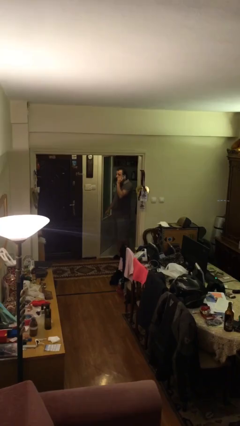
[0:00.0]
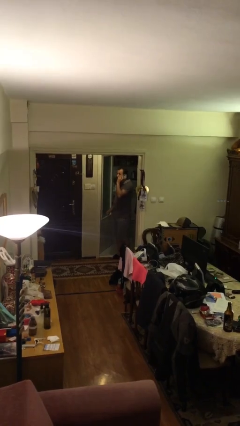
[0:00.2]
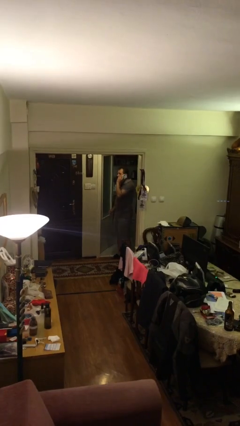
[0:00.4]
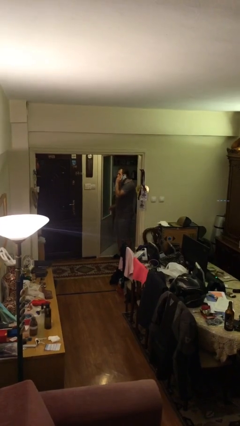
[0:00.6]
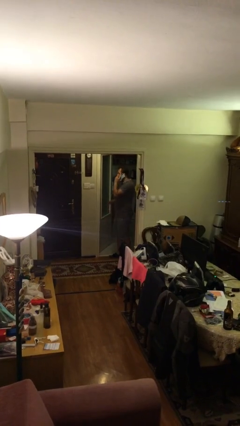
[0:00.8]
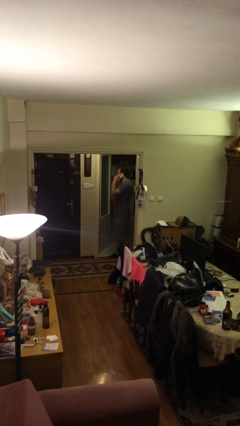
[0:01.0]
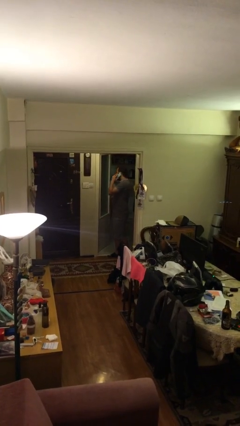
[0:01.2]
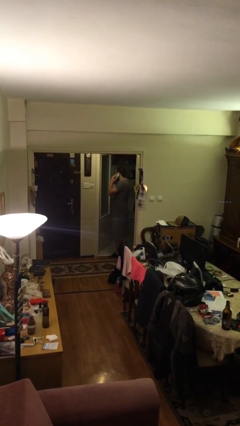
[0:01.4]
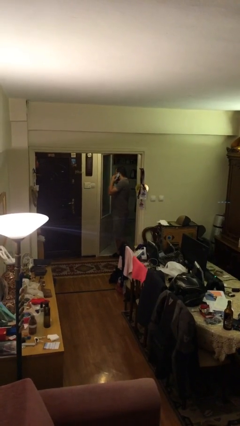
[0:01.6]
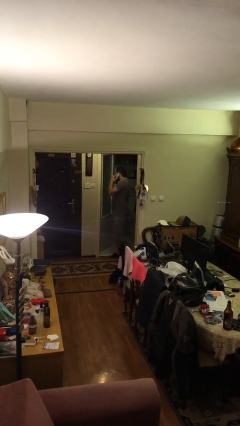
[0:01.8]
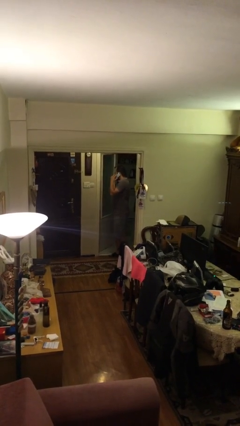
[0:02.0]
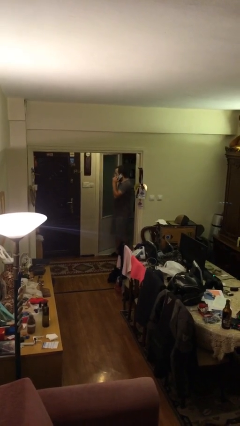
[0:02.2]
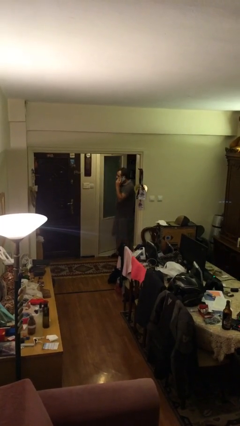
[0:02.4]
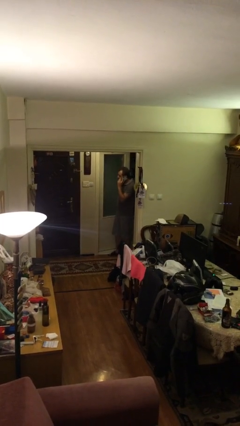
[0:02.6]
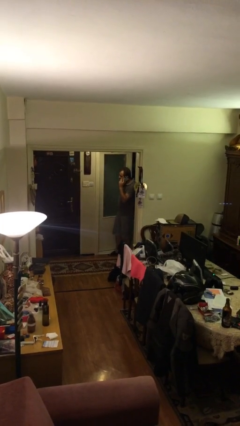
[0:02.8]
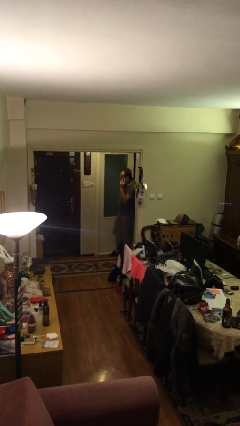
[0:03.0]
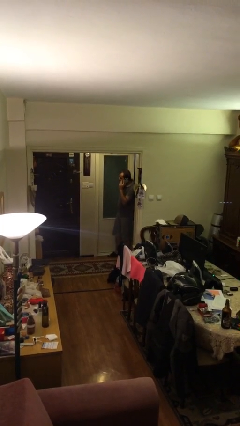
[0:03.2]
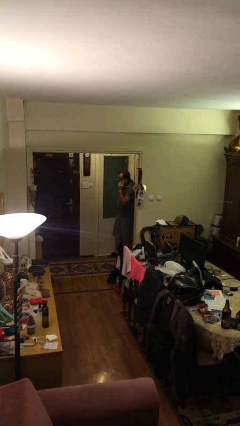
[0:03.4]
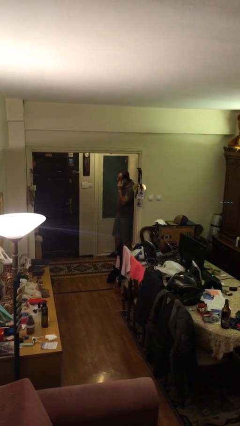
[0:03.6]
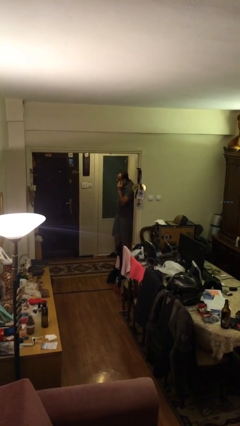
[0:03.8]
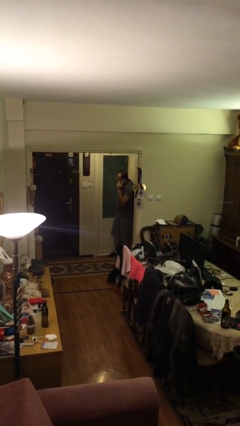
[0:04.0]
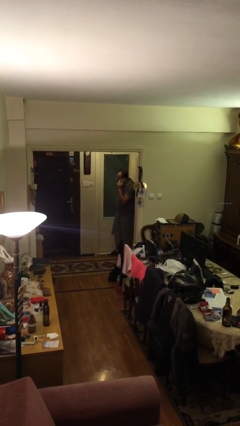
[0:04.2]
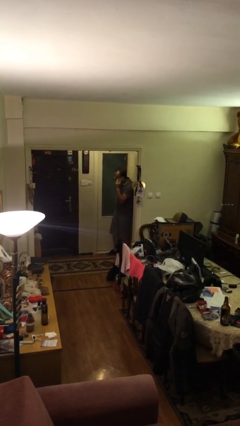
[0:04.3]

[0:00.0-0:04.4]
person closes facility door

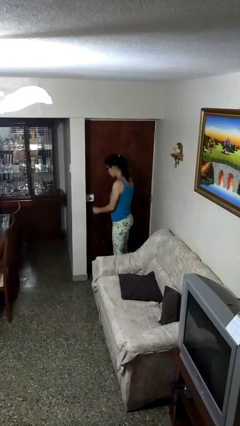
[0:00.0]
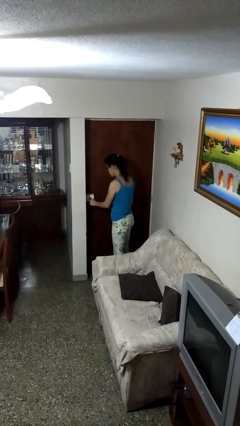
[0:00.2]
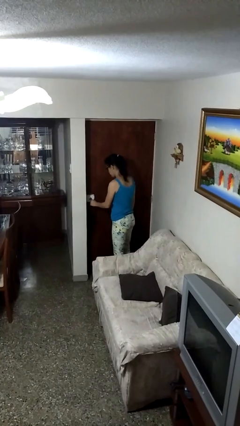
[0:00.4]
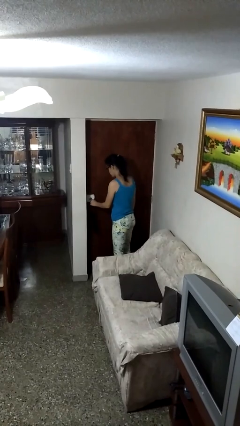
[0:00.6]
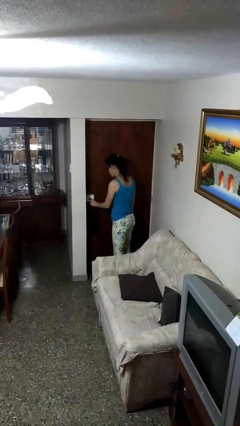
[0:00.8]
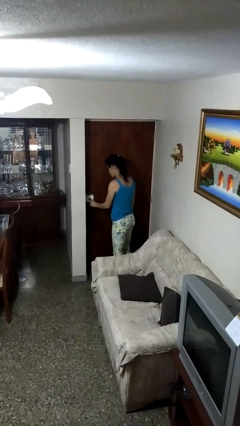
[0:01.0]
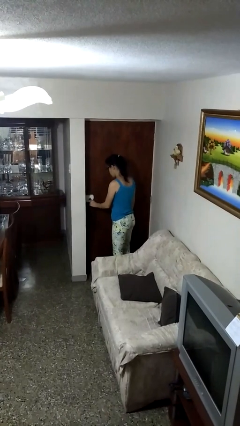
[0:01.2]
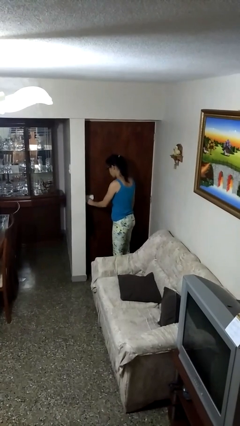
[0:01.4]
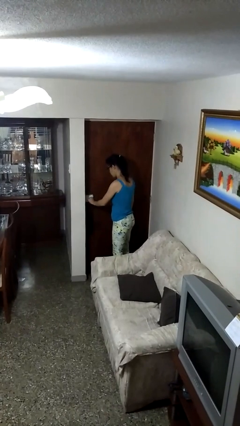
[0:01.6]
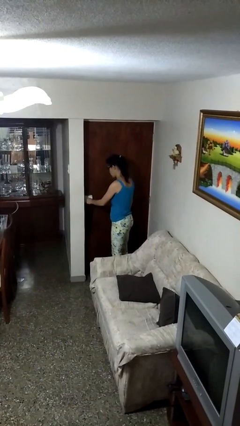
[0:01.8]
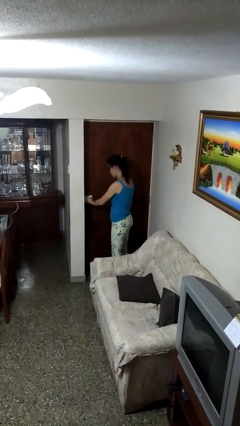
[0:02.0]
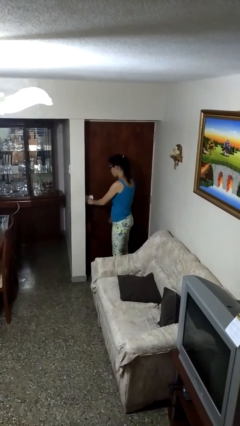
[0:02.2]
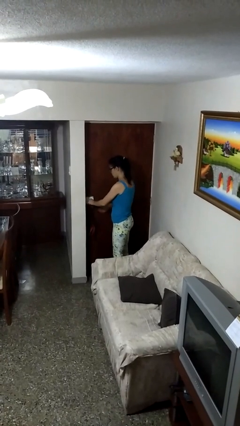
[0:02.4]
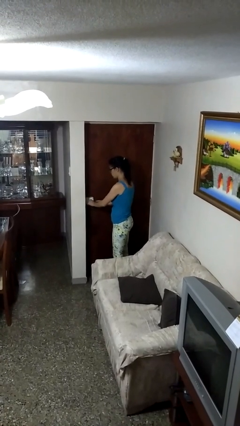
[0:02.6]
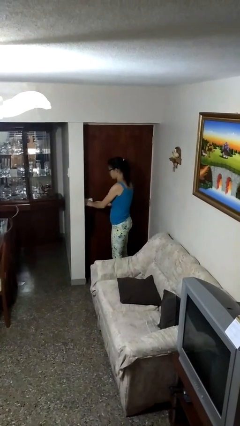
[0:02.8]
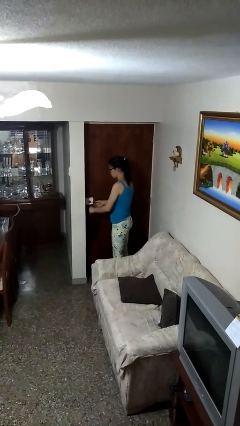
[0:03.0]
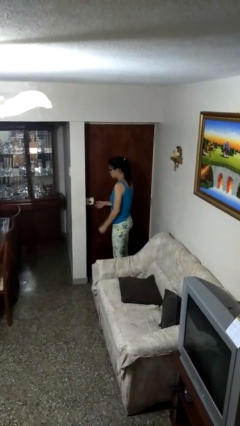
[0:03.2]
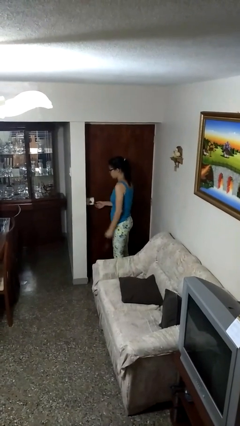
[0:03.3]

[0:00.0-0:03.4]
person unlocks door with keys

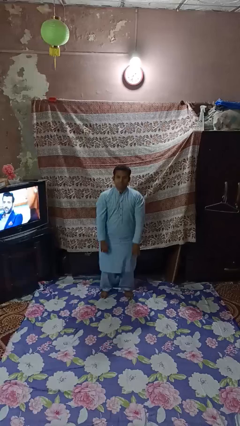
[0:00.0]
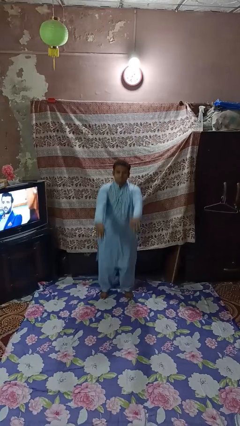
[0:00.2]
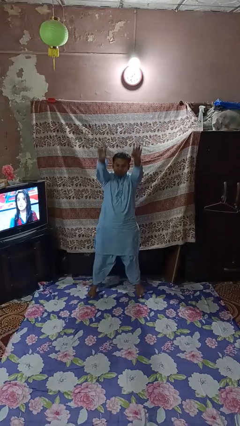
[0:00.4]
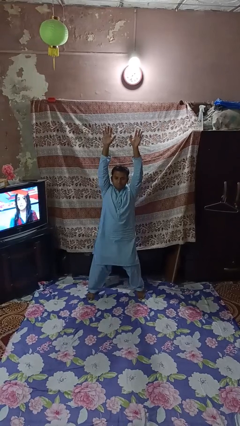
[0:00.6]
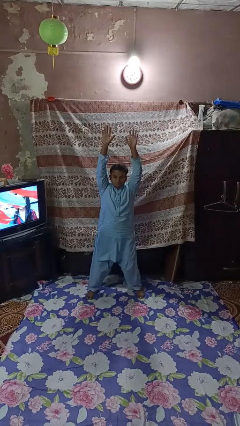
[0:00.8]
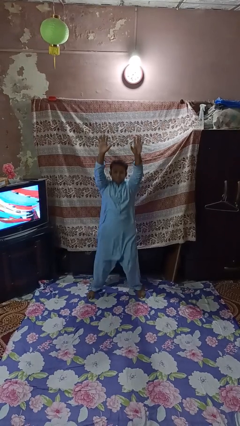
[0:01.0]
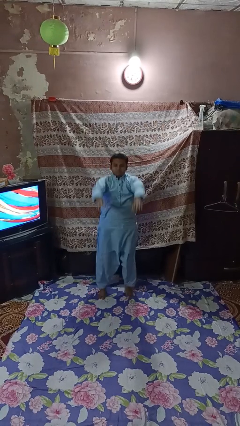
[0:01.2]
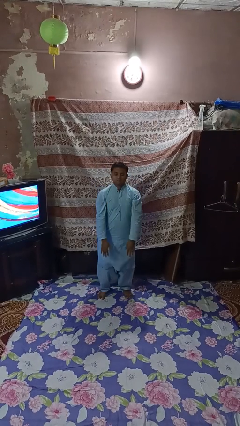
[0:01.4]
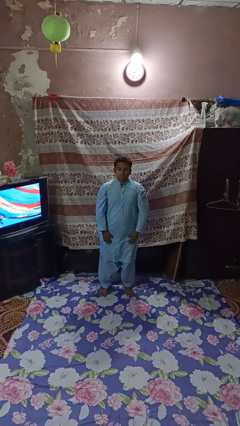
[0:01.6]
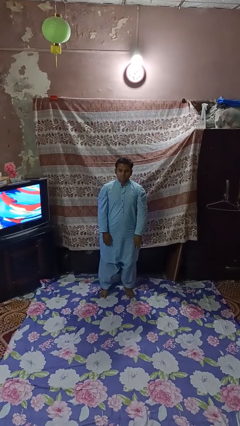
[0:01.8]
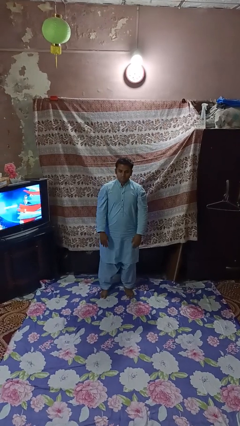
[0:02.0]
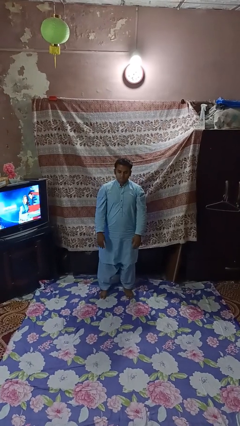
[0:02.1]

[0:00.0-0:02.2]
person exercises with jumping jacks

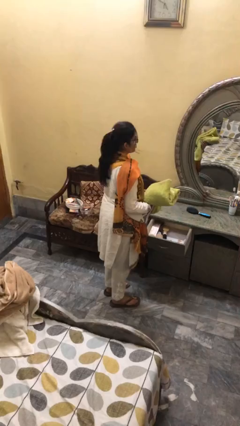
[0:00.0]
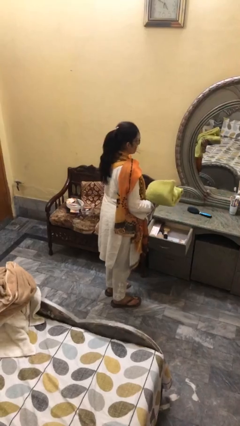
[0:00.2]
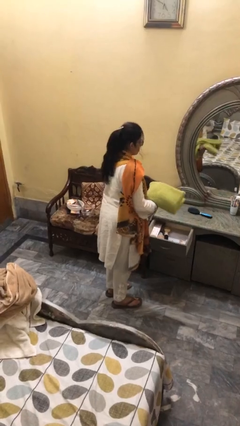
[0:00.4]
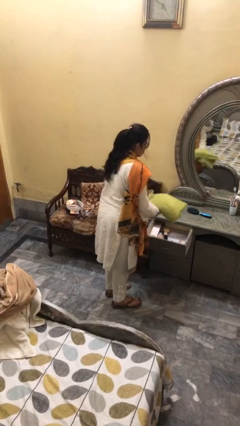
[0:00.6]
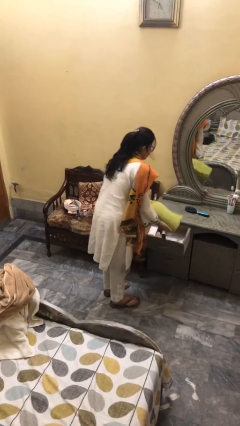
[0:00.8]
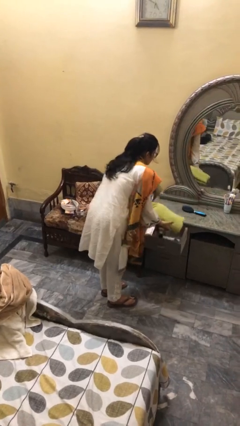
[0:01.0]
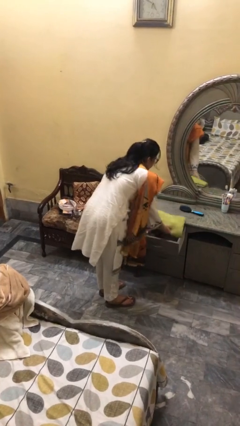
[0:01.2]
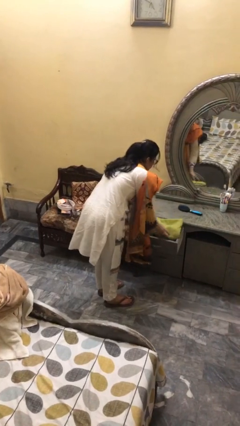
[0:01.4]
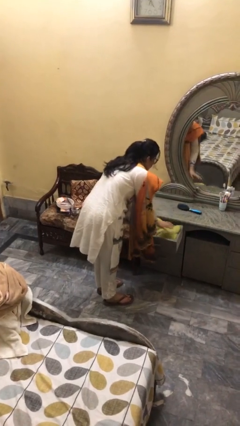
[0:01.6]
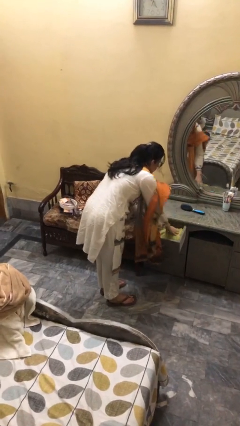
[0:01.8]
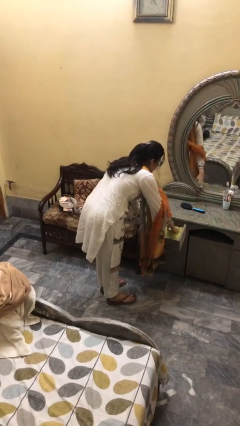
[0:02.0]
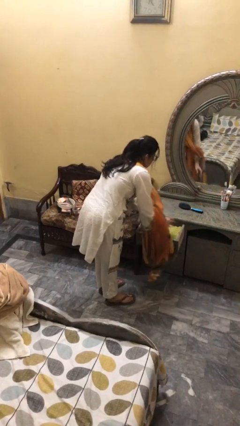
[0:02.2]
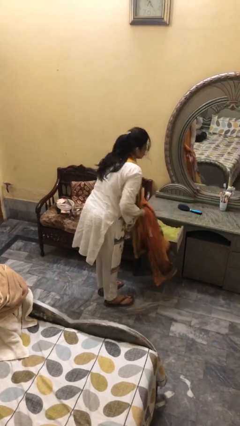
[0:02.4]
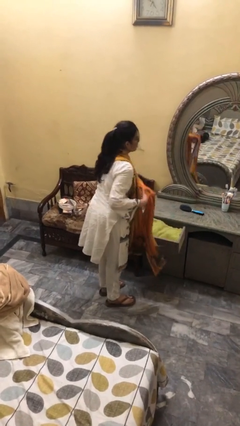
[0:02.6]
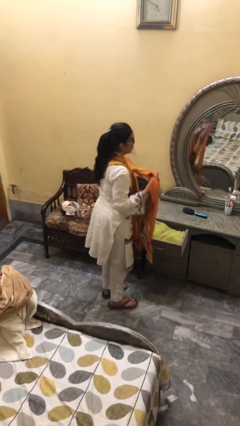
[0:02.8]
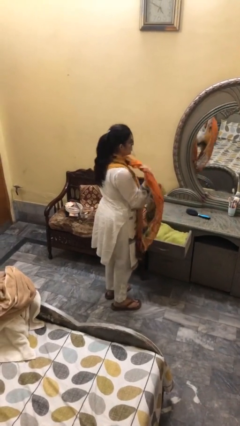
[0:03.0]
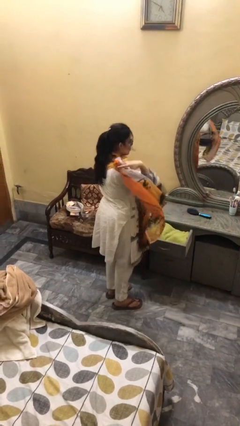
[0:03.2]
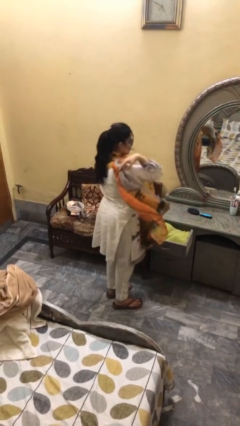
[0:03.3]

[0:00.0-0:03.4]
person puts clothes into dresser

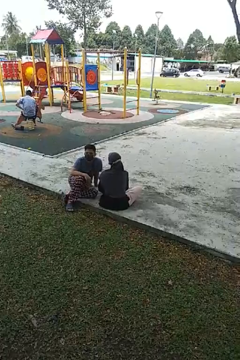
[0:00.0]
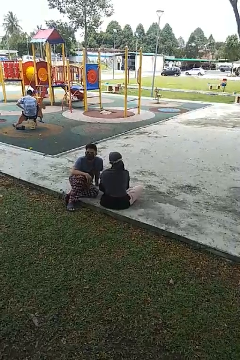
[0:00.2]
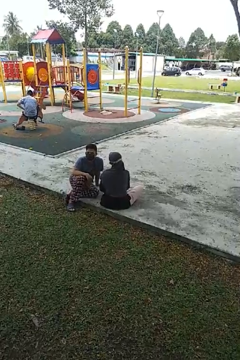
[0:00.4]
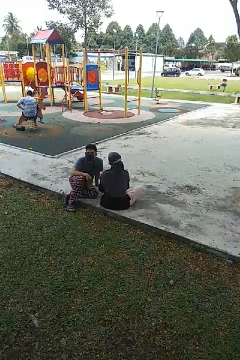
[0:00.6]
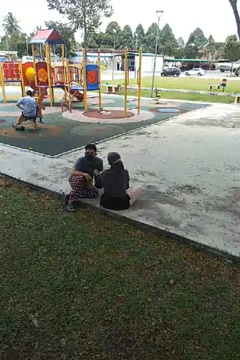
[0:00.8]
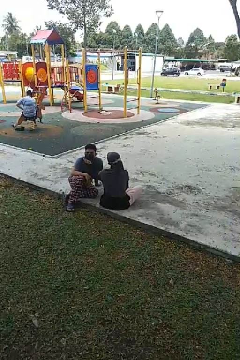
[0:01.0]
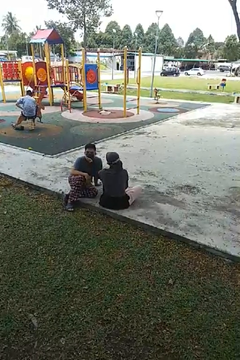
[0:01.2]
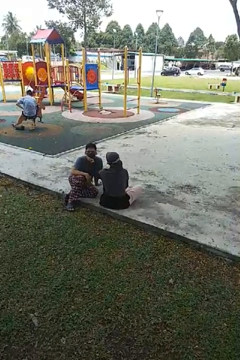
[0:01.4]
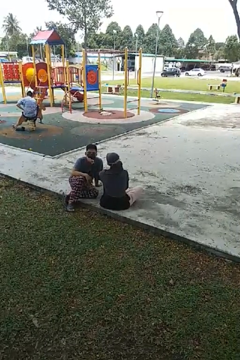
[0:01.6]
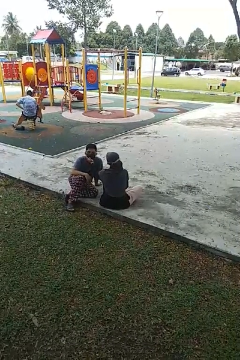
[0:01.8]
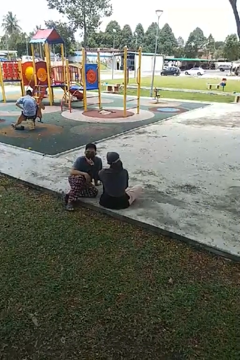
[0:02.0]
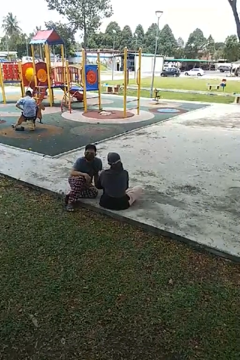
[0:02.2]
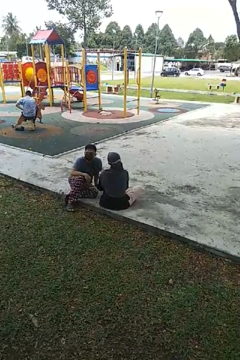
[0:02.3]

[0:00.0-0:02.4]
person touches face of person

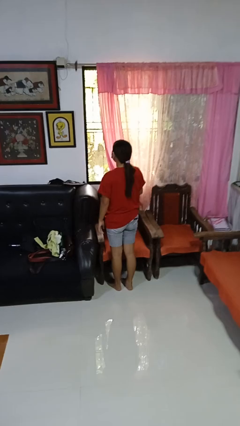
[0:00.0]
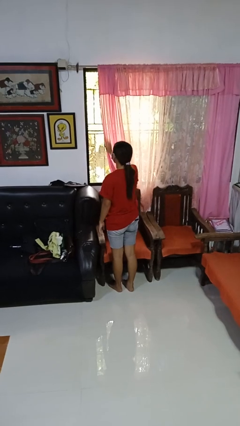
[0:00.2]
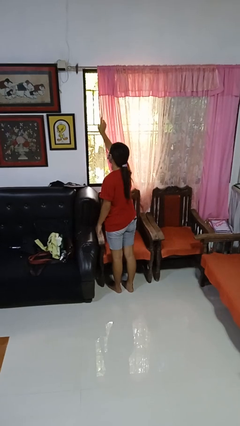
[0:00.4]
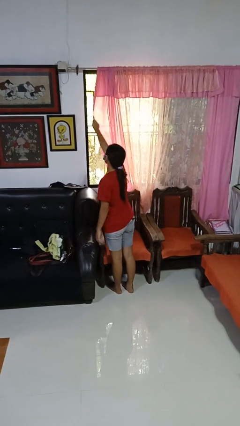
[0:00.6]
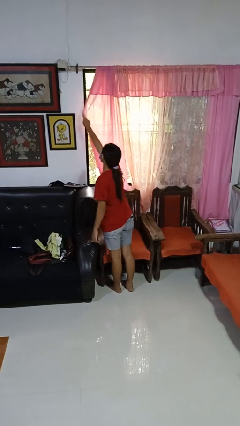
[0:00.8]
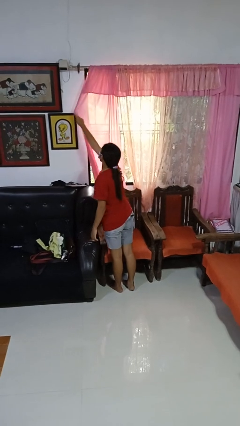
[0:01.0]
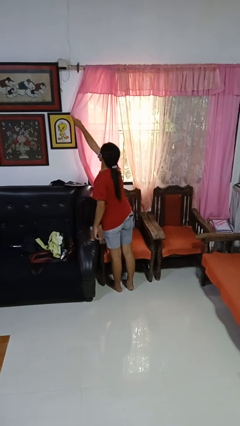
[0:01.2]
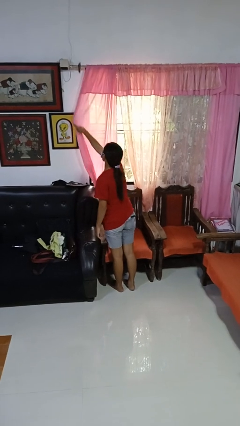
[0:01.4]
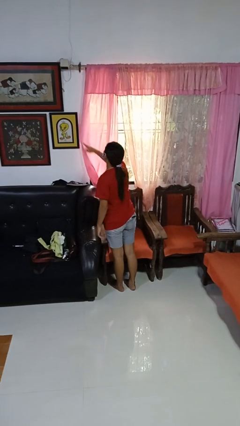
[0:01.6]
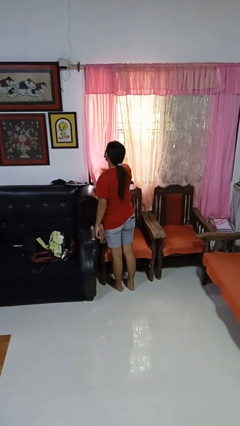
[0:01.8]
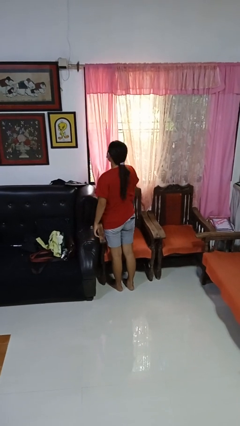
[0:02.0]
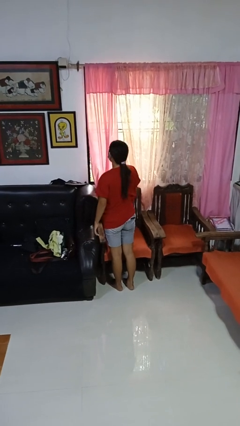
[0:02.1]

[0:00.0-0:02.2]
person closes curtains
